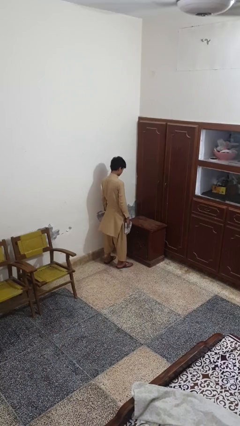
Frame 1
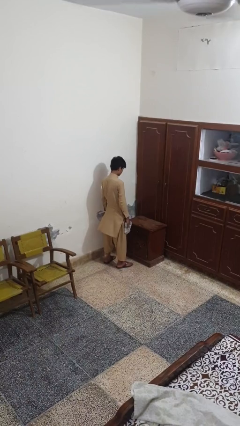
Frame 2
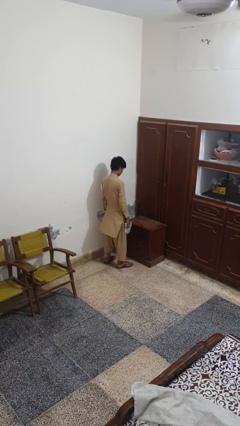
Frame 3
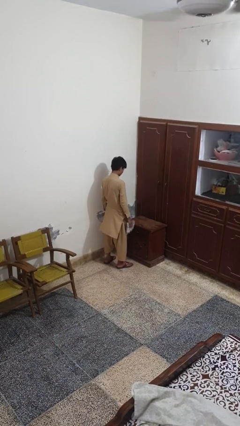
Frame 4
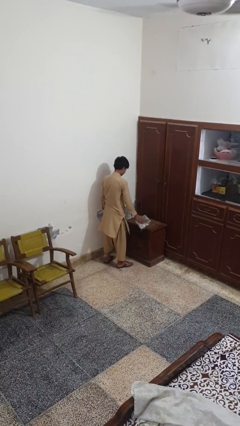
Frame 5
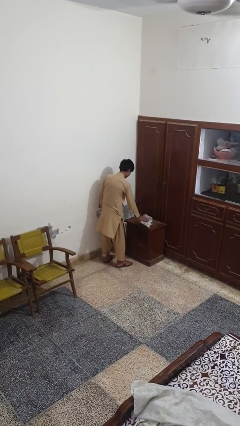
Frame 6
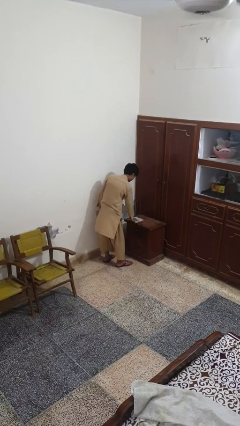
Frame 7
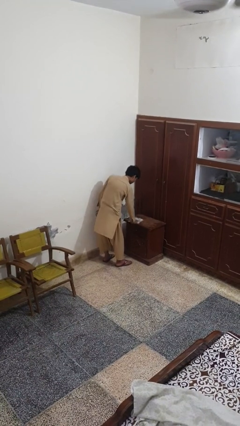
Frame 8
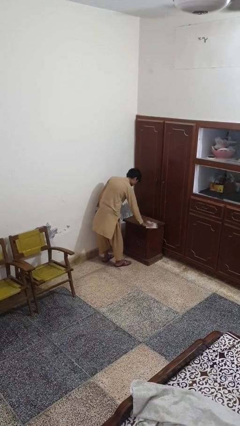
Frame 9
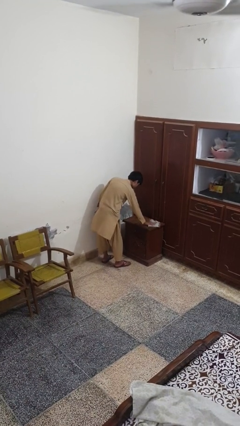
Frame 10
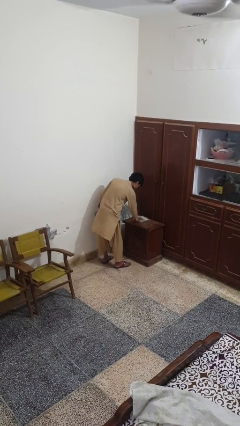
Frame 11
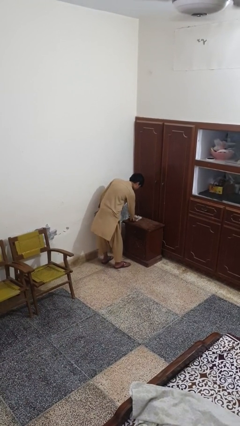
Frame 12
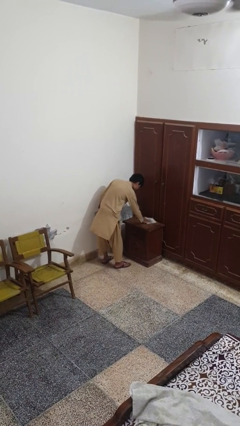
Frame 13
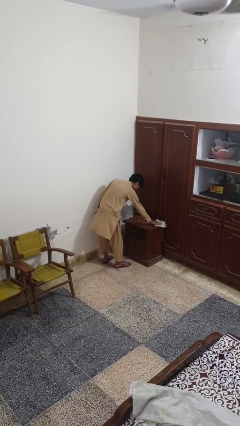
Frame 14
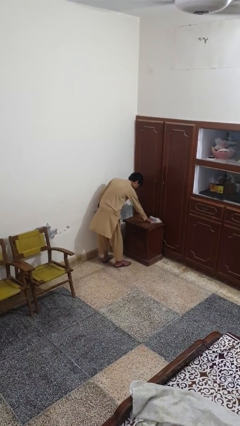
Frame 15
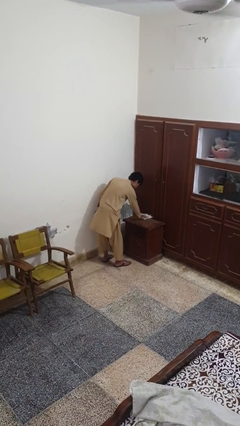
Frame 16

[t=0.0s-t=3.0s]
person cleans table with rag

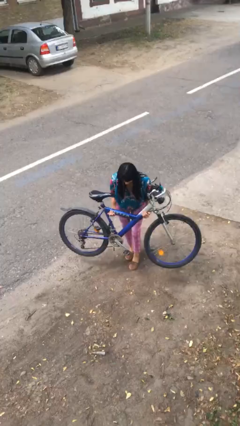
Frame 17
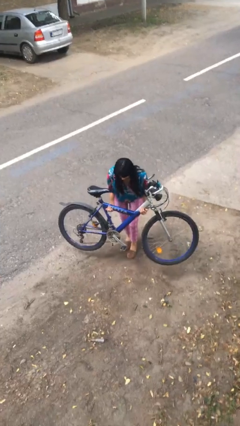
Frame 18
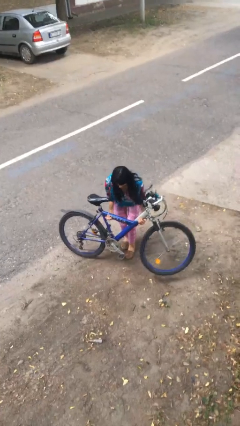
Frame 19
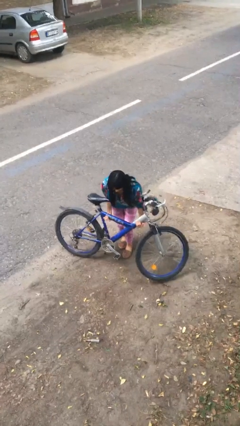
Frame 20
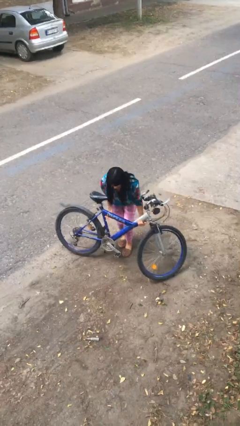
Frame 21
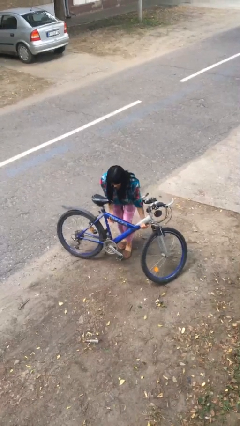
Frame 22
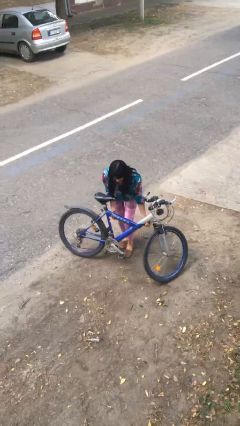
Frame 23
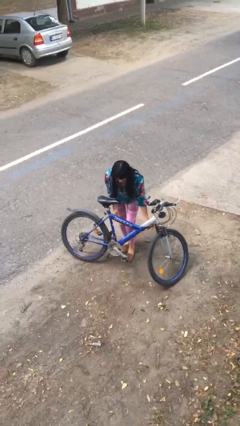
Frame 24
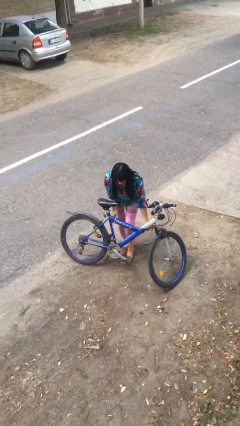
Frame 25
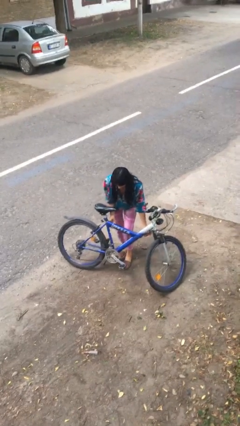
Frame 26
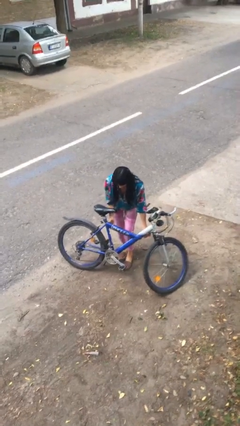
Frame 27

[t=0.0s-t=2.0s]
person puts down object on floor

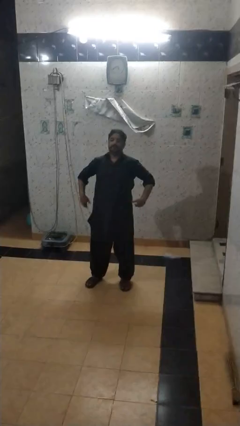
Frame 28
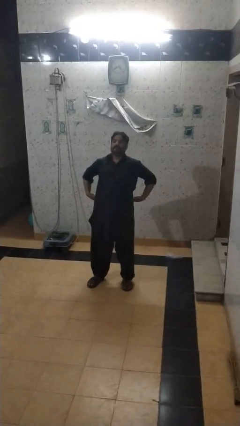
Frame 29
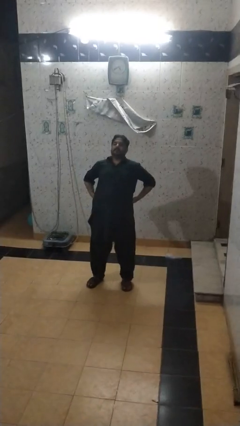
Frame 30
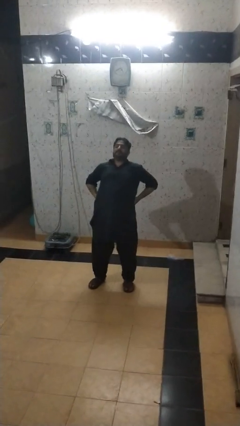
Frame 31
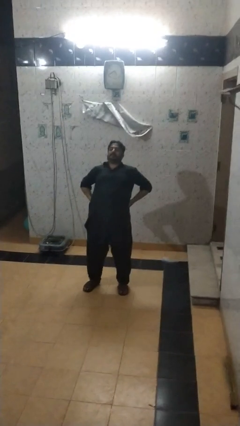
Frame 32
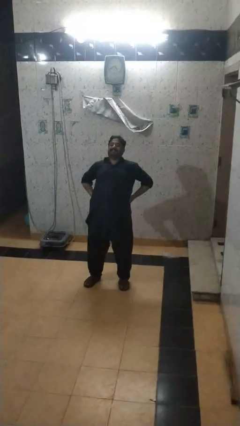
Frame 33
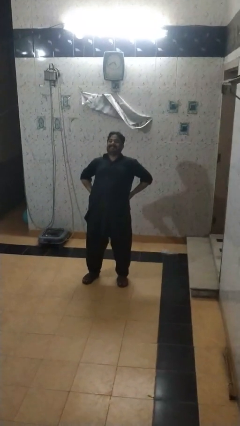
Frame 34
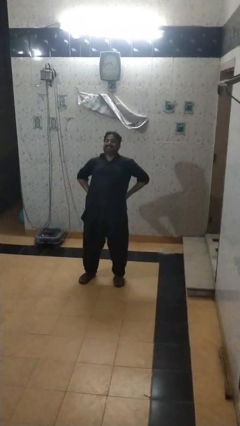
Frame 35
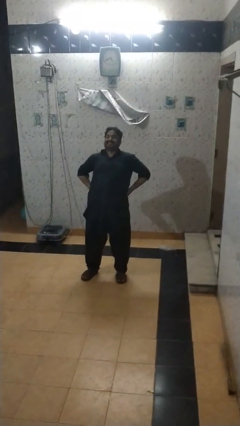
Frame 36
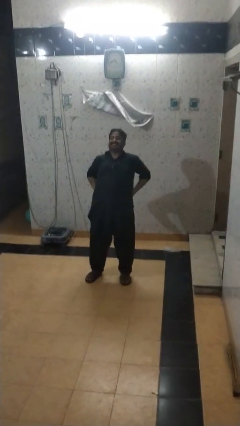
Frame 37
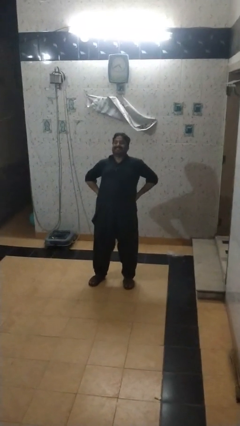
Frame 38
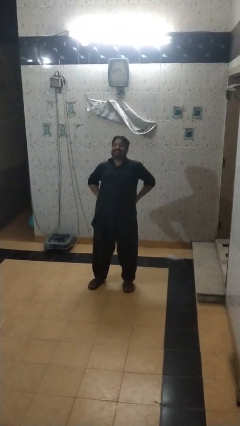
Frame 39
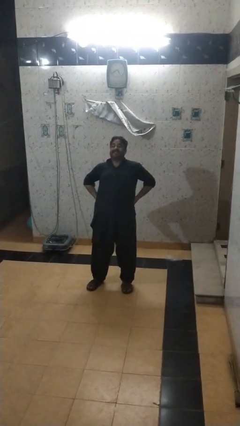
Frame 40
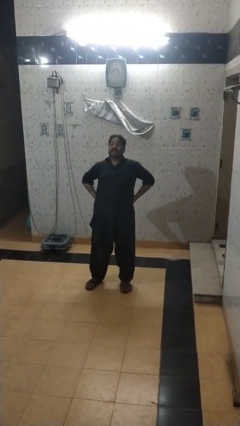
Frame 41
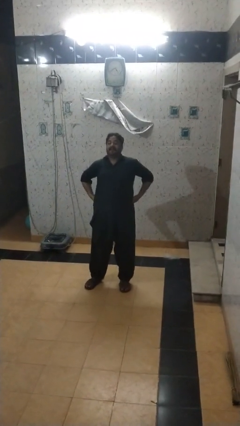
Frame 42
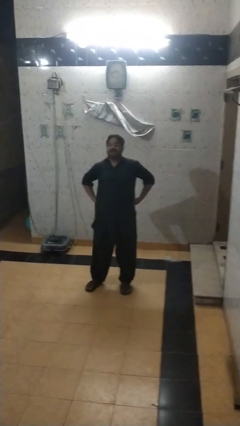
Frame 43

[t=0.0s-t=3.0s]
person stretches back

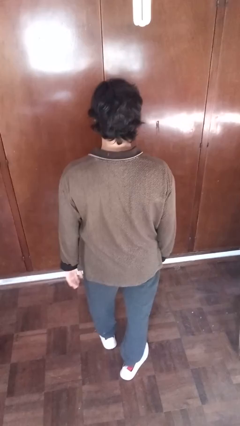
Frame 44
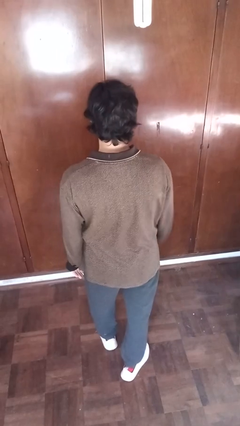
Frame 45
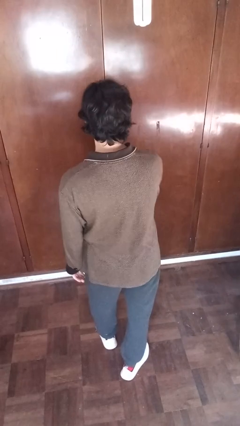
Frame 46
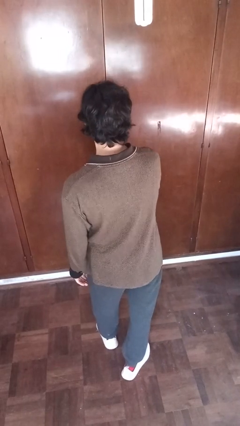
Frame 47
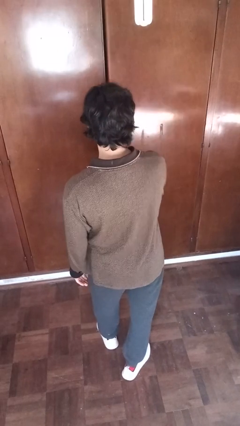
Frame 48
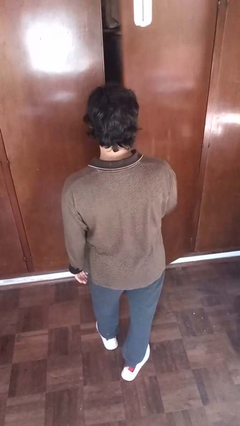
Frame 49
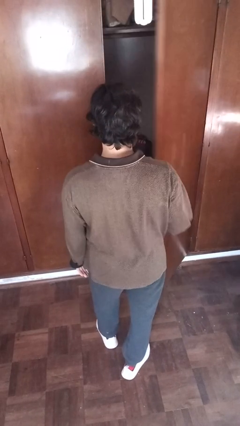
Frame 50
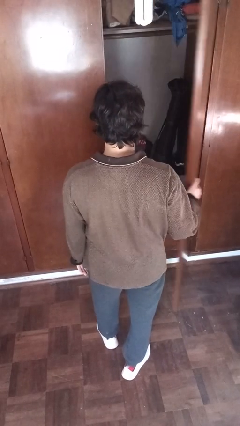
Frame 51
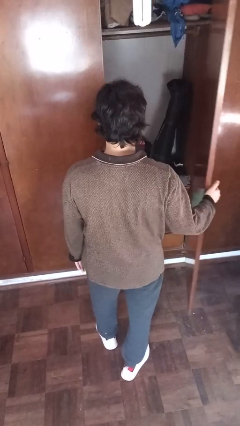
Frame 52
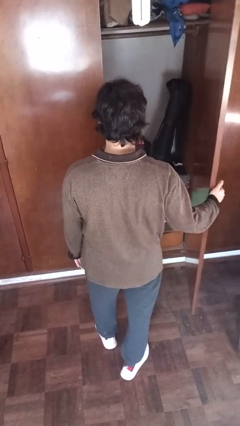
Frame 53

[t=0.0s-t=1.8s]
person opens closet door

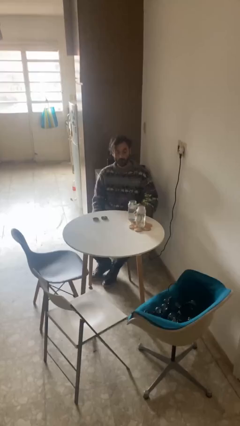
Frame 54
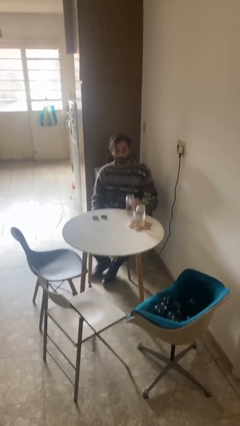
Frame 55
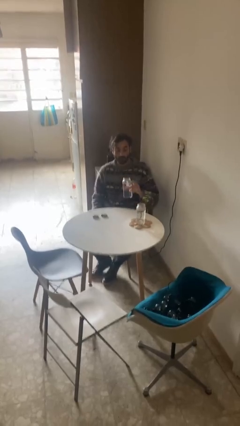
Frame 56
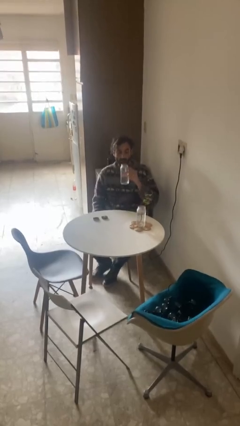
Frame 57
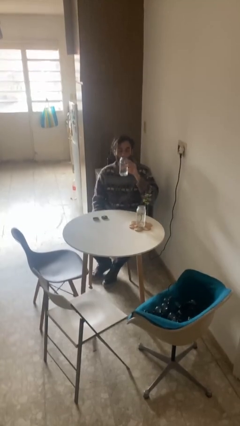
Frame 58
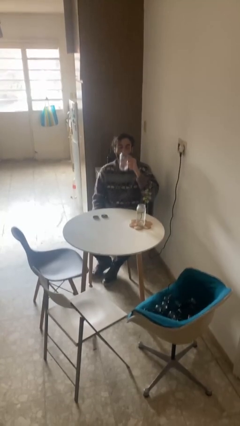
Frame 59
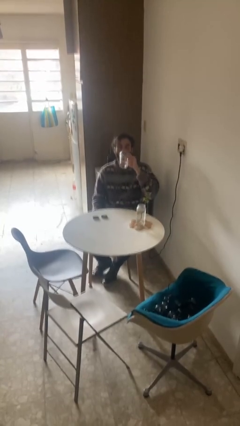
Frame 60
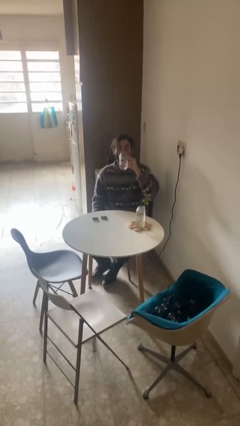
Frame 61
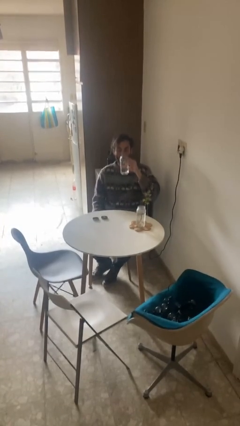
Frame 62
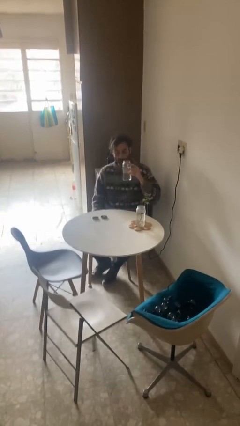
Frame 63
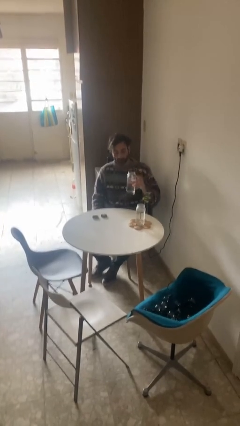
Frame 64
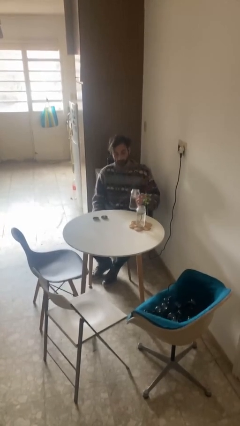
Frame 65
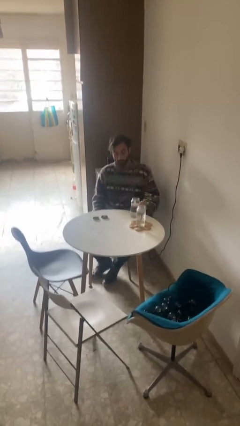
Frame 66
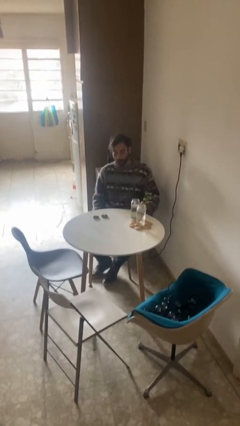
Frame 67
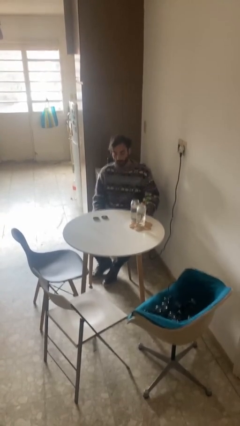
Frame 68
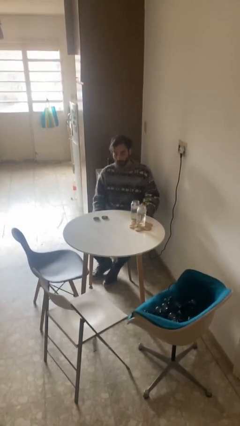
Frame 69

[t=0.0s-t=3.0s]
person drinks from cup

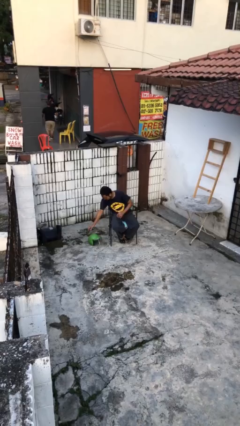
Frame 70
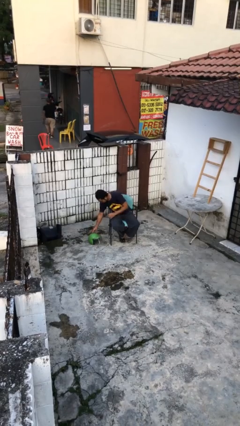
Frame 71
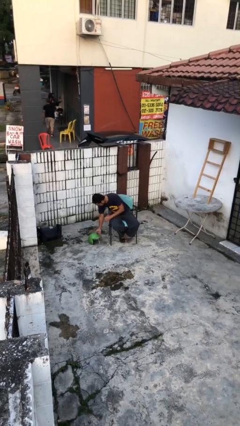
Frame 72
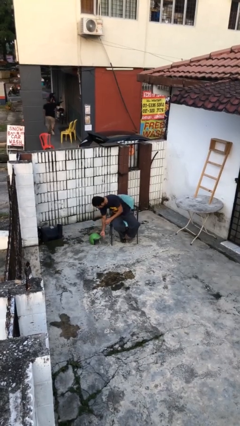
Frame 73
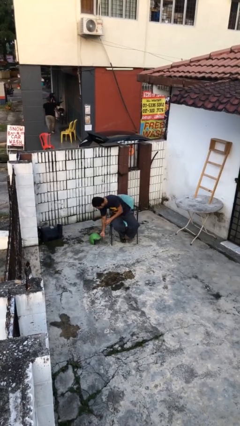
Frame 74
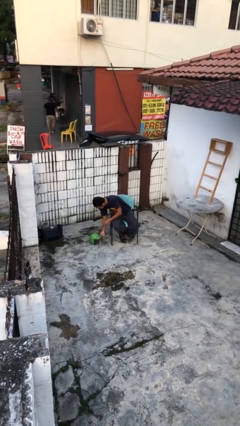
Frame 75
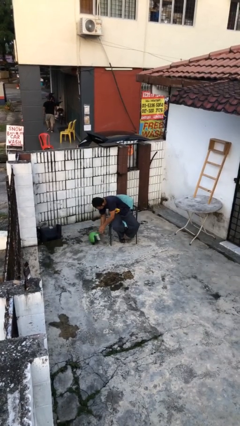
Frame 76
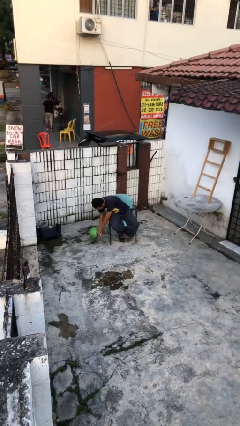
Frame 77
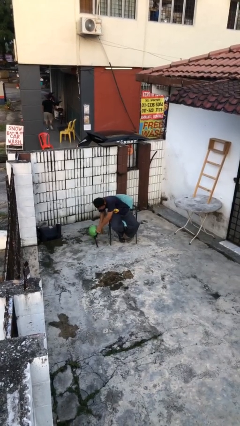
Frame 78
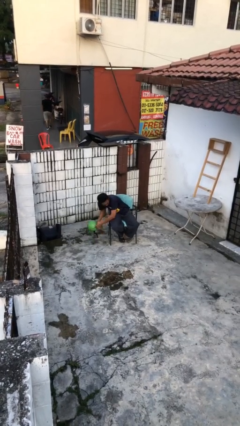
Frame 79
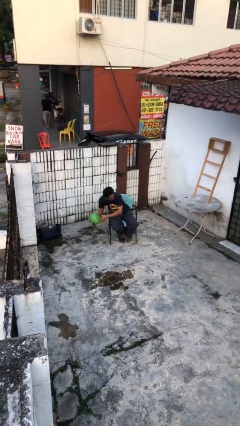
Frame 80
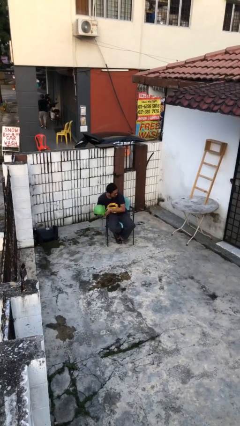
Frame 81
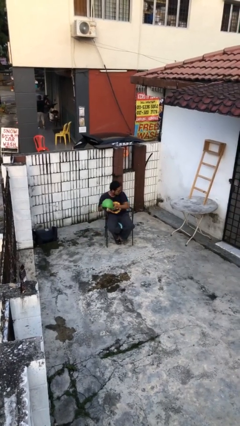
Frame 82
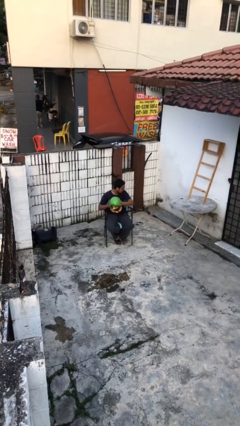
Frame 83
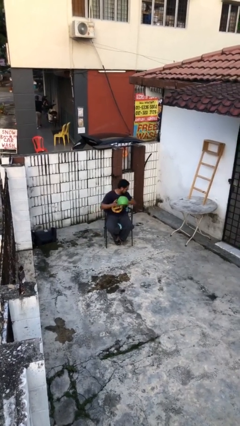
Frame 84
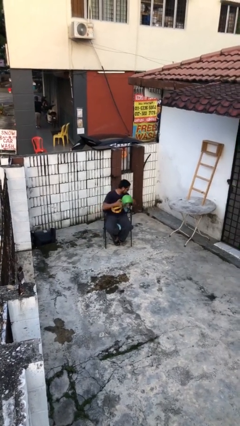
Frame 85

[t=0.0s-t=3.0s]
person picks up object from floor

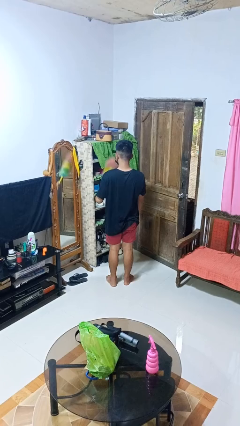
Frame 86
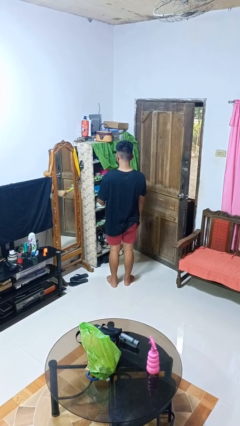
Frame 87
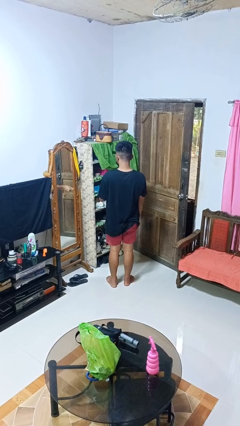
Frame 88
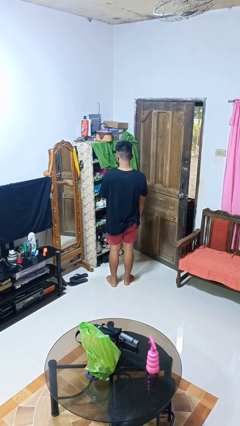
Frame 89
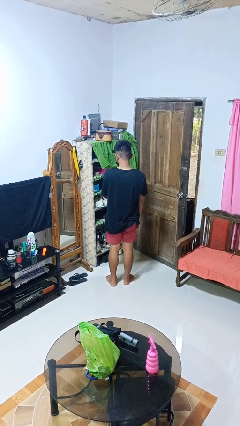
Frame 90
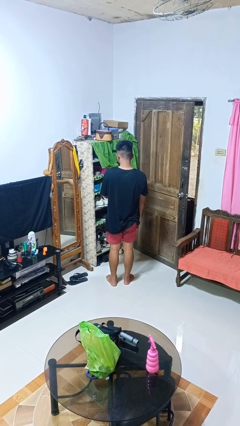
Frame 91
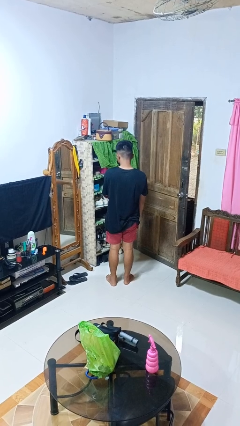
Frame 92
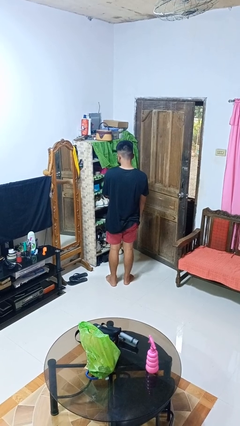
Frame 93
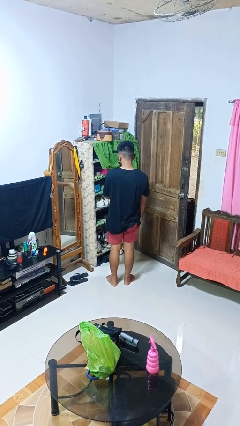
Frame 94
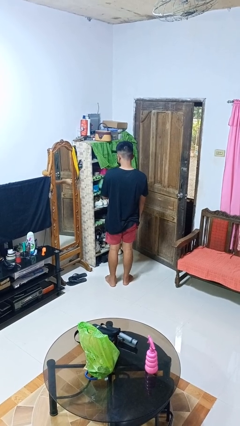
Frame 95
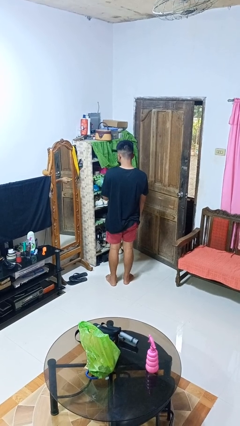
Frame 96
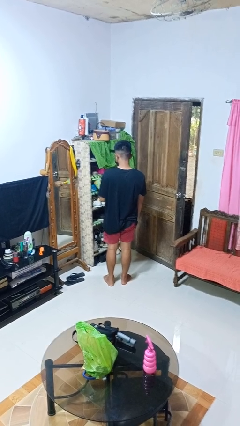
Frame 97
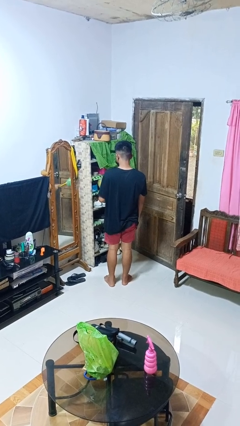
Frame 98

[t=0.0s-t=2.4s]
person dusts furniture
